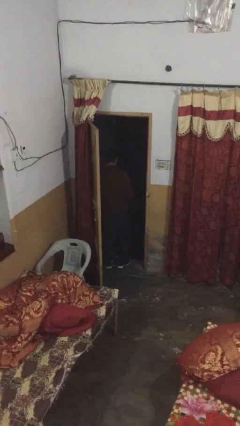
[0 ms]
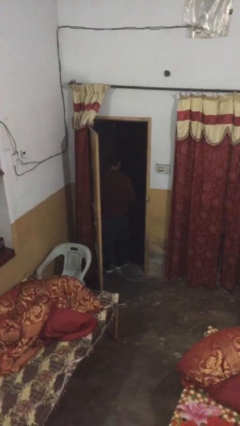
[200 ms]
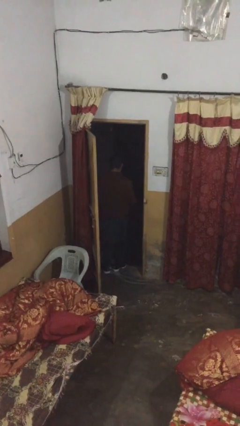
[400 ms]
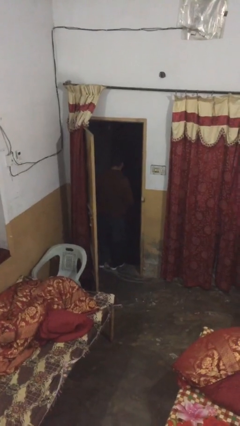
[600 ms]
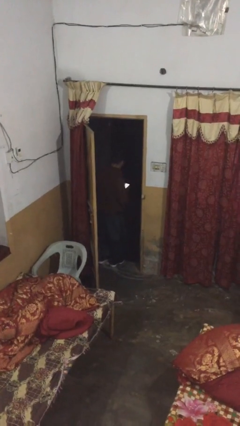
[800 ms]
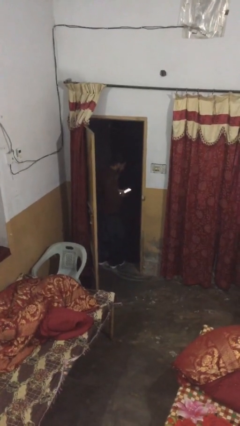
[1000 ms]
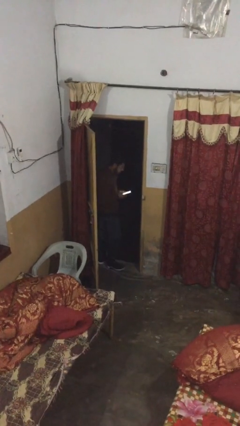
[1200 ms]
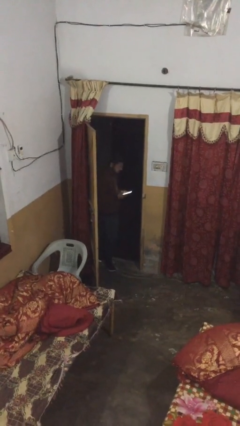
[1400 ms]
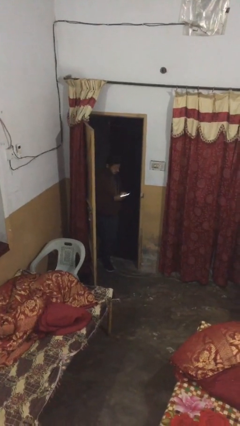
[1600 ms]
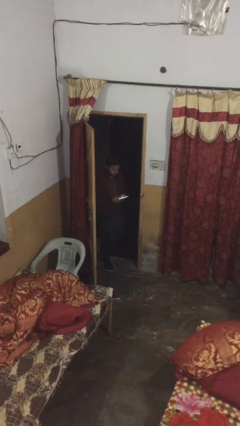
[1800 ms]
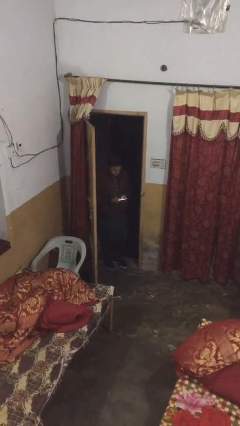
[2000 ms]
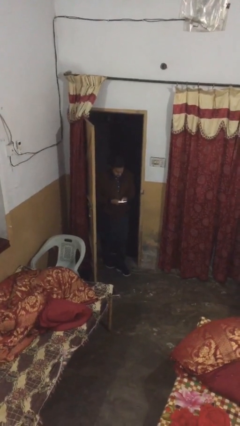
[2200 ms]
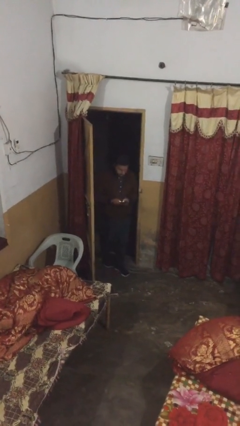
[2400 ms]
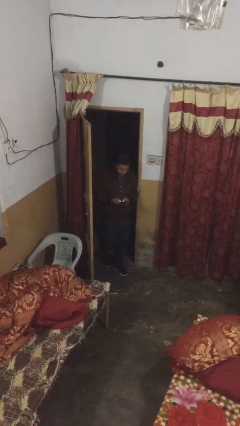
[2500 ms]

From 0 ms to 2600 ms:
person enters scene through structure

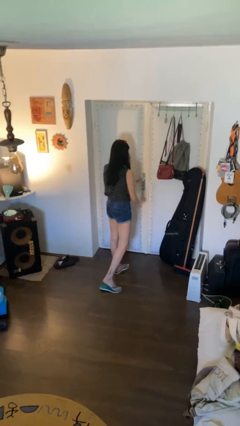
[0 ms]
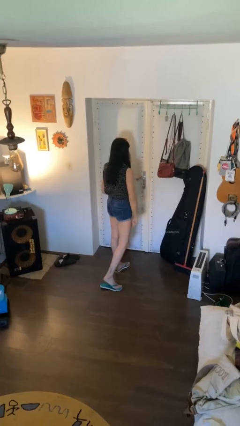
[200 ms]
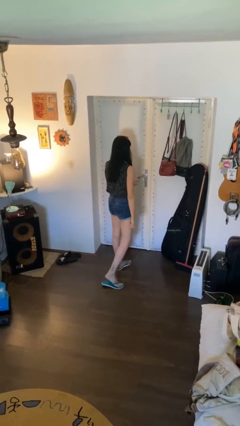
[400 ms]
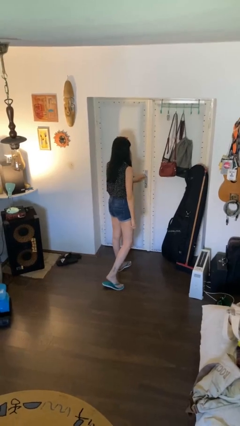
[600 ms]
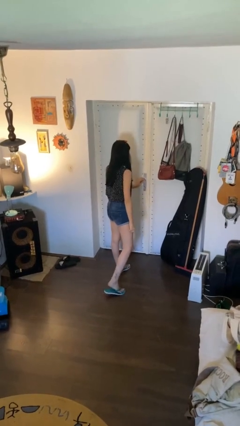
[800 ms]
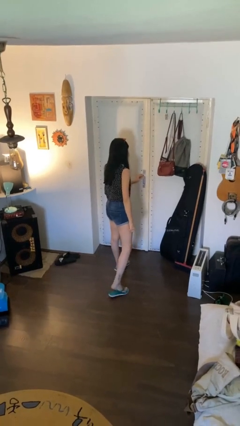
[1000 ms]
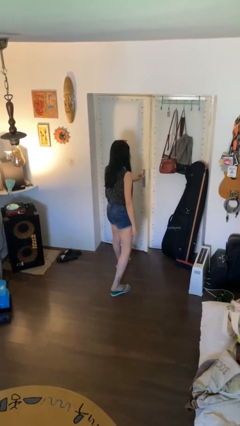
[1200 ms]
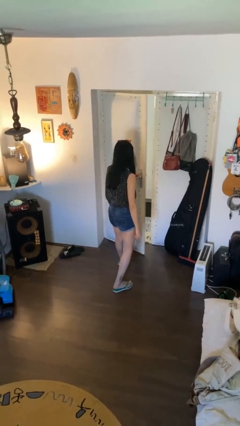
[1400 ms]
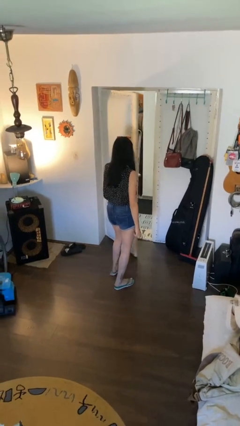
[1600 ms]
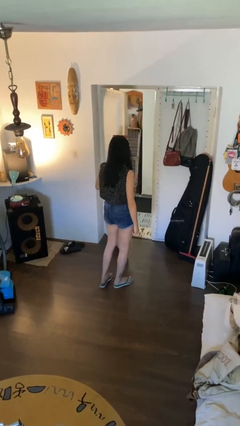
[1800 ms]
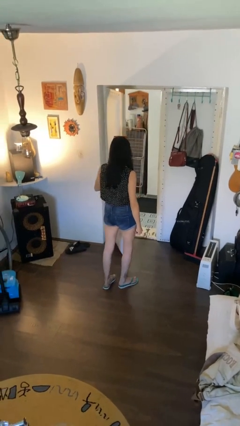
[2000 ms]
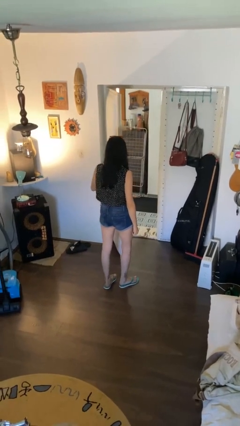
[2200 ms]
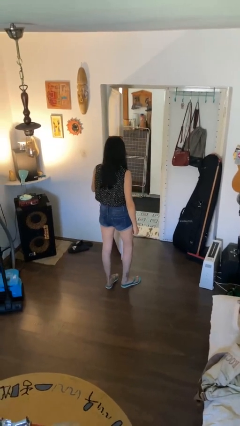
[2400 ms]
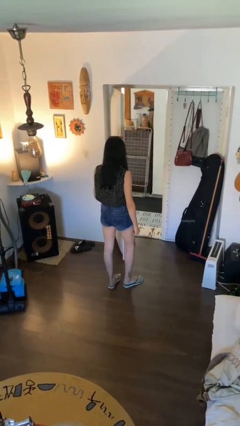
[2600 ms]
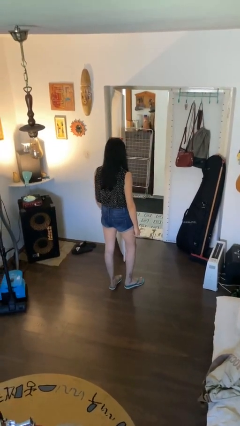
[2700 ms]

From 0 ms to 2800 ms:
person opens facility door

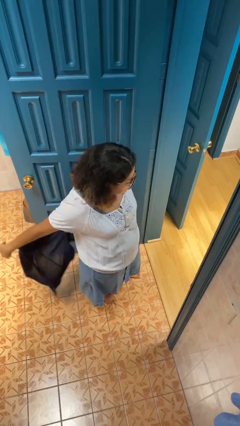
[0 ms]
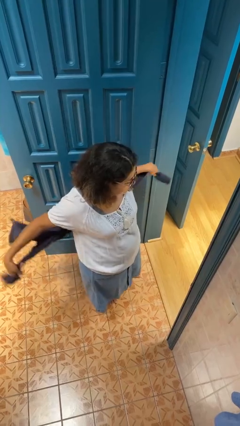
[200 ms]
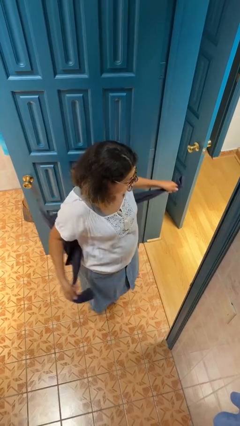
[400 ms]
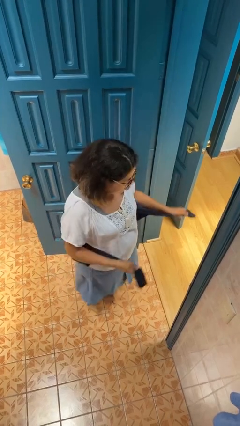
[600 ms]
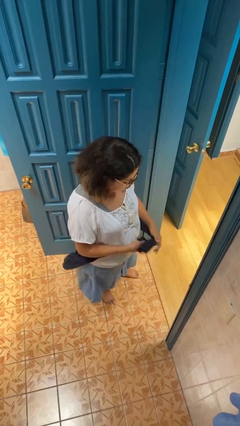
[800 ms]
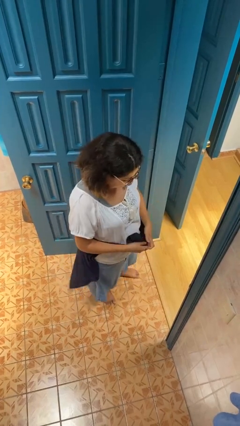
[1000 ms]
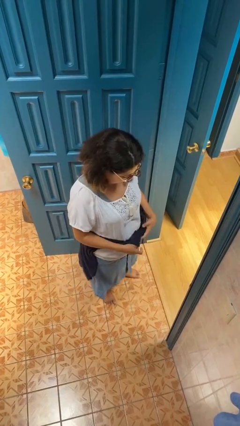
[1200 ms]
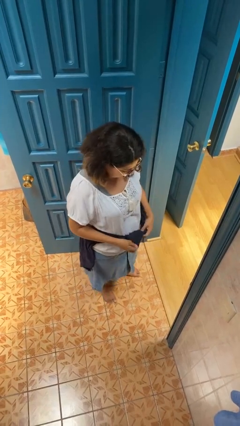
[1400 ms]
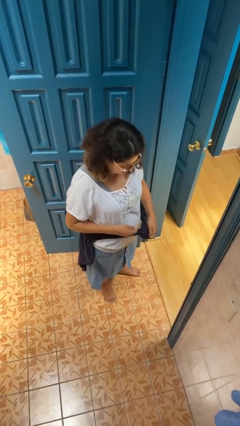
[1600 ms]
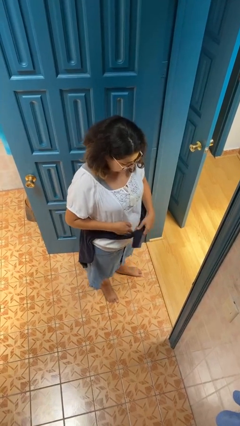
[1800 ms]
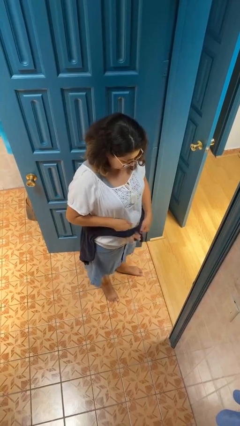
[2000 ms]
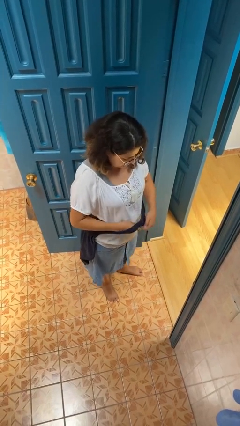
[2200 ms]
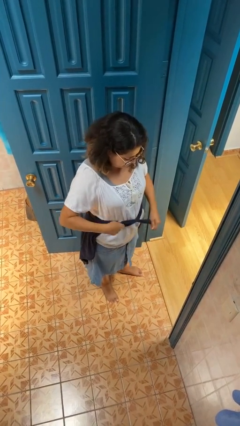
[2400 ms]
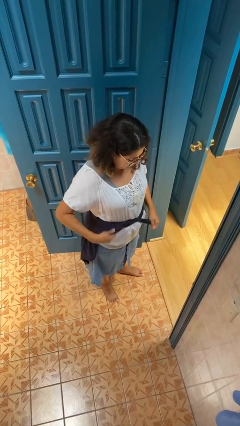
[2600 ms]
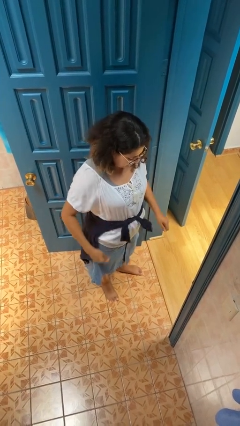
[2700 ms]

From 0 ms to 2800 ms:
person ties jacket around waist

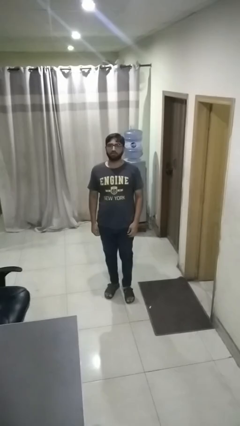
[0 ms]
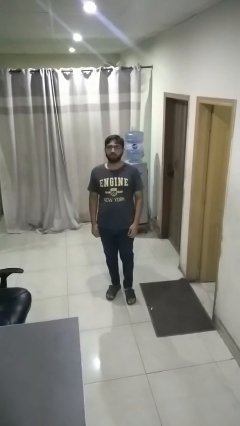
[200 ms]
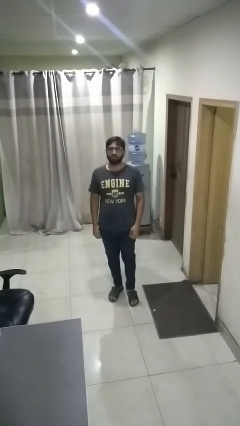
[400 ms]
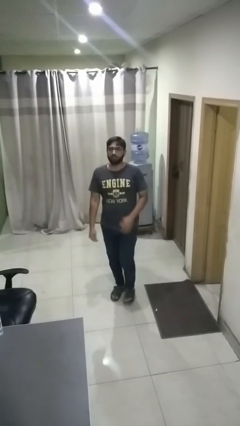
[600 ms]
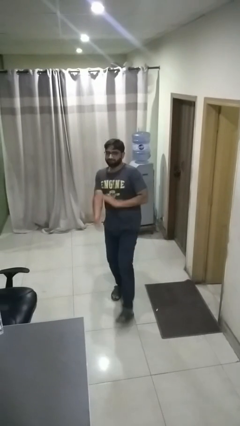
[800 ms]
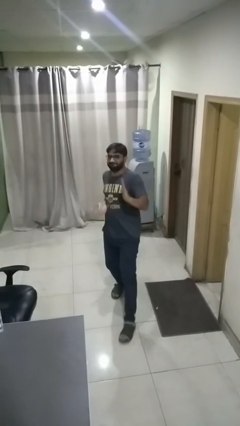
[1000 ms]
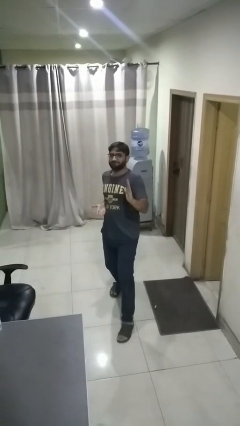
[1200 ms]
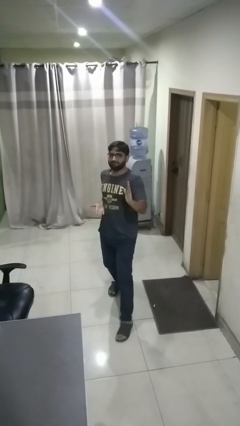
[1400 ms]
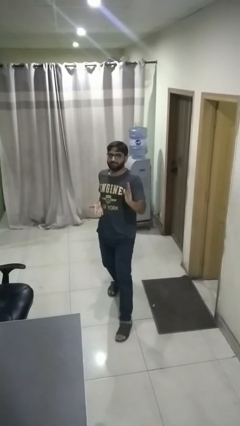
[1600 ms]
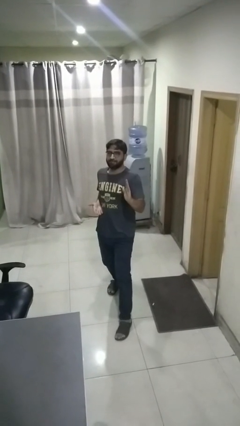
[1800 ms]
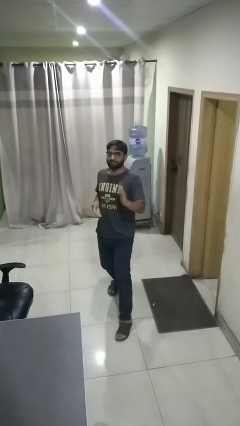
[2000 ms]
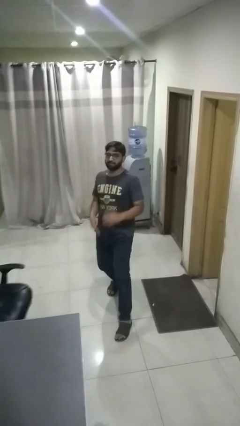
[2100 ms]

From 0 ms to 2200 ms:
person karate chop

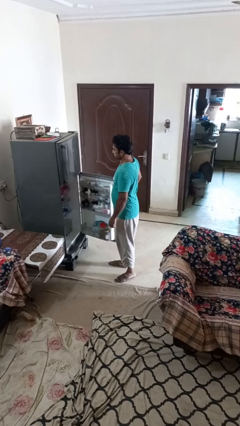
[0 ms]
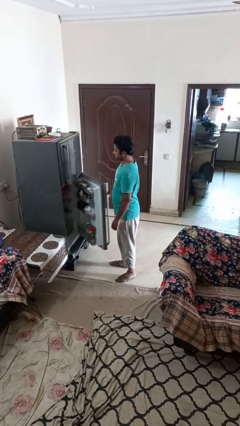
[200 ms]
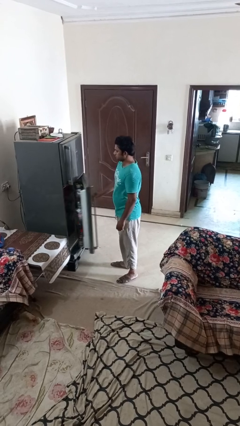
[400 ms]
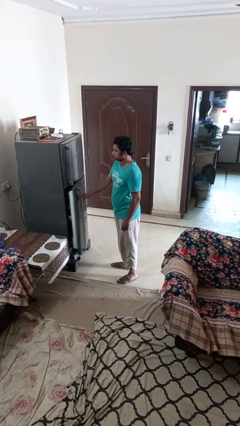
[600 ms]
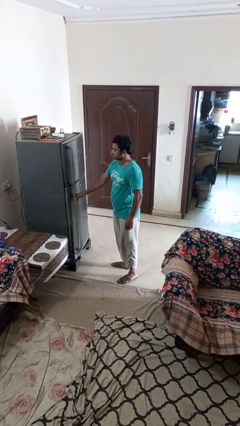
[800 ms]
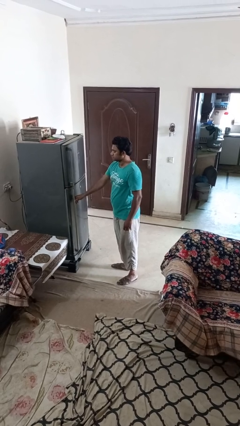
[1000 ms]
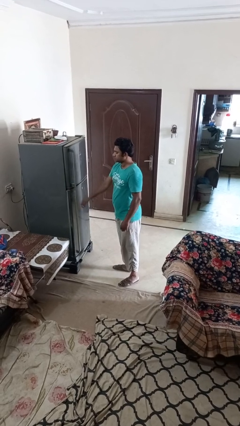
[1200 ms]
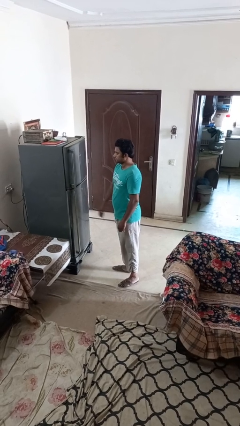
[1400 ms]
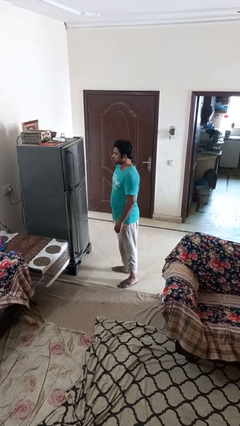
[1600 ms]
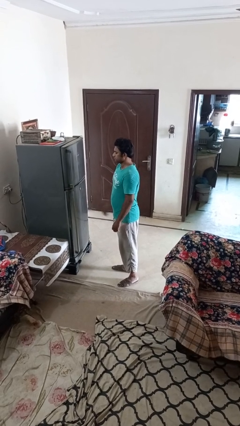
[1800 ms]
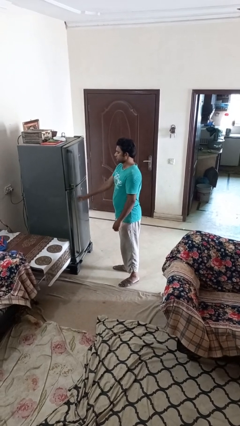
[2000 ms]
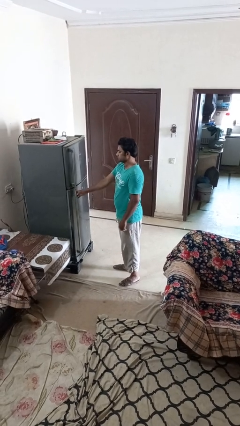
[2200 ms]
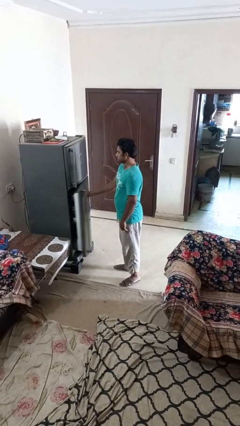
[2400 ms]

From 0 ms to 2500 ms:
person closes refrigerator

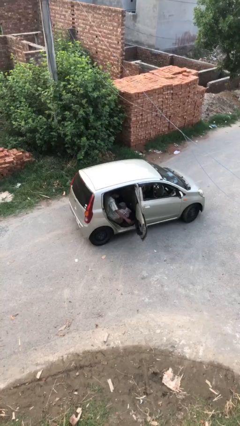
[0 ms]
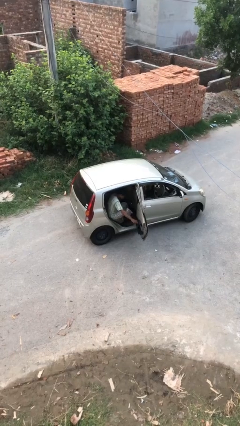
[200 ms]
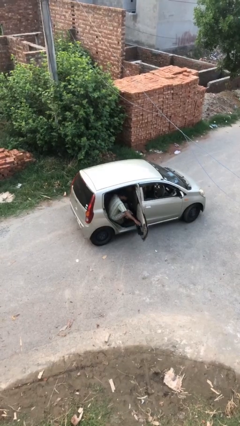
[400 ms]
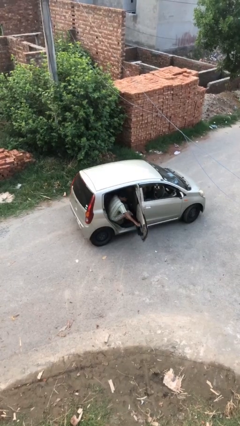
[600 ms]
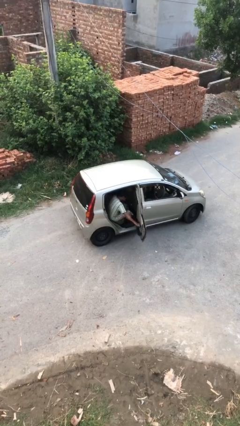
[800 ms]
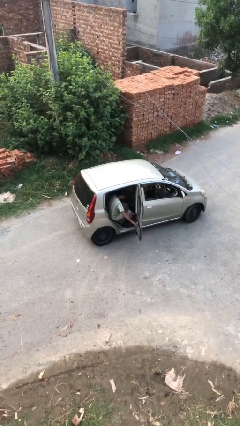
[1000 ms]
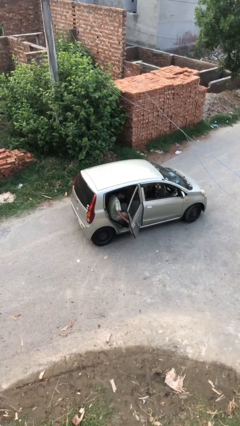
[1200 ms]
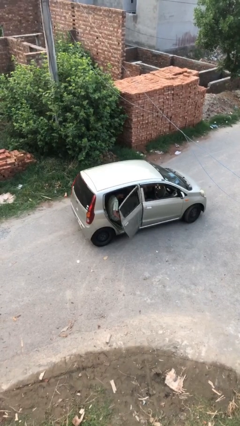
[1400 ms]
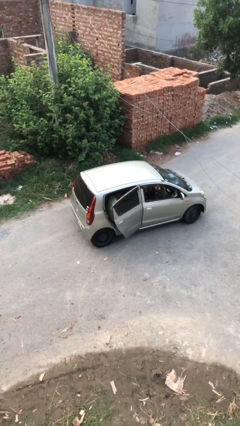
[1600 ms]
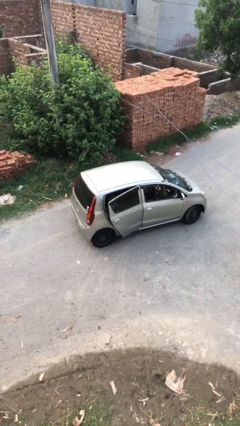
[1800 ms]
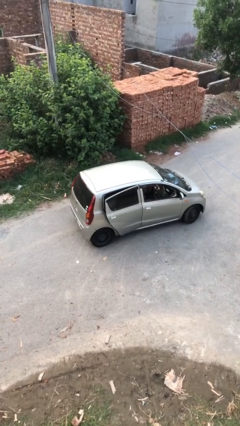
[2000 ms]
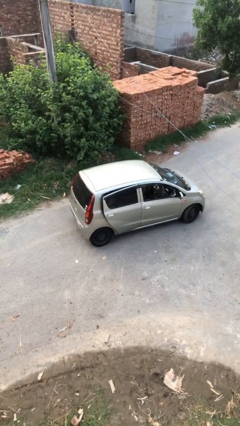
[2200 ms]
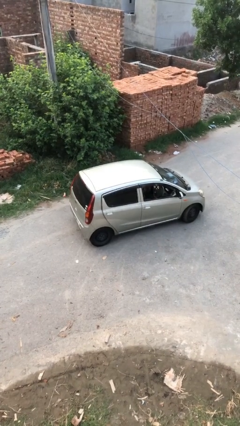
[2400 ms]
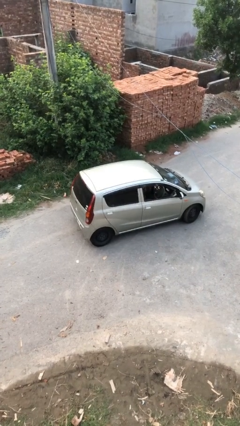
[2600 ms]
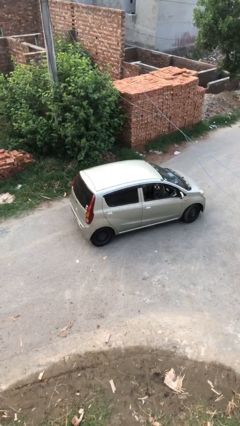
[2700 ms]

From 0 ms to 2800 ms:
person closes car door

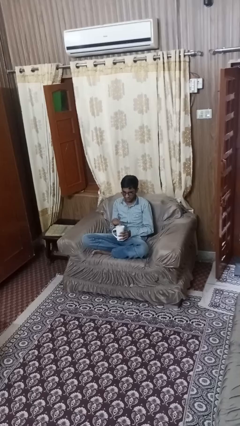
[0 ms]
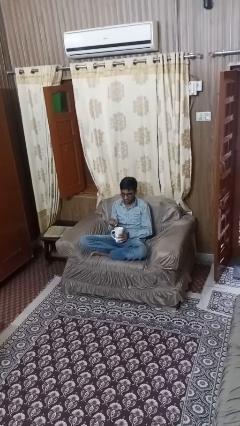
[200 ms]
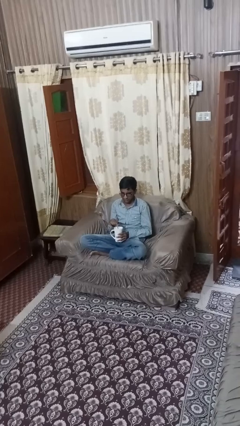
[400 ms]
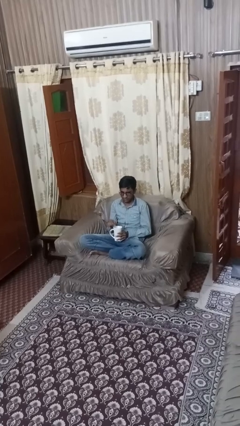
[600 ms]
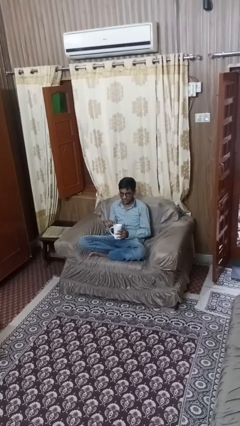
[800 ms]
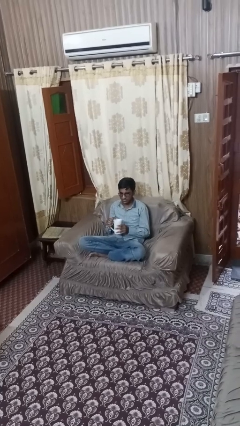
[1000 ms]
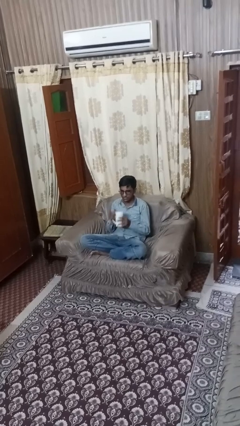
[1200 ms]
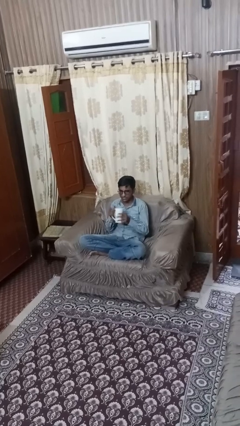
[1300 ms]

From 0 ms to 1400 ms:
person stirs mug
